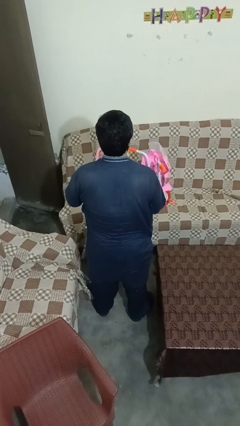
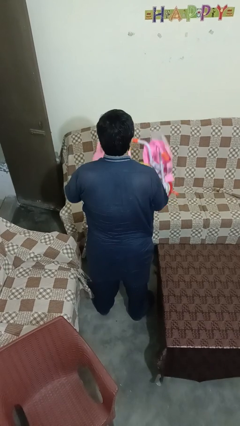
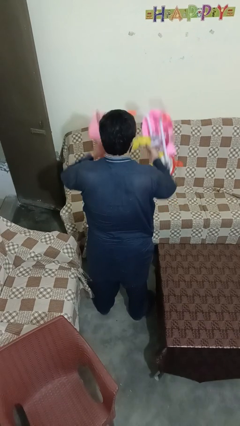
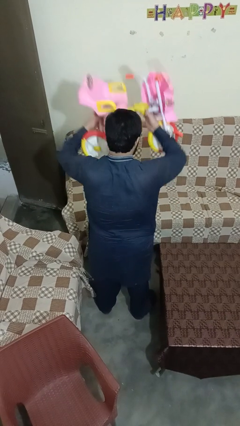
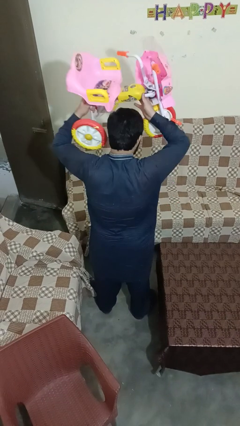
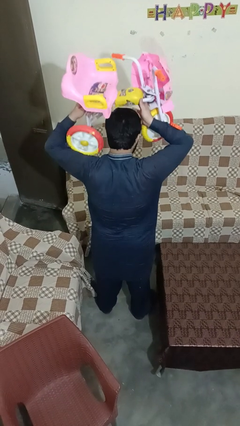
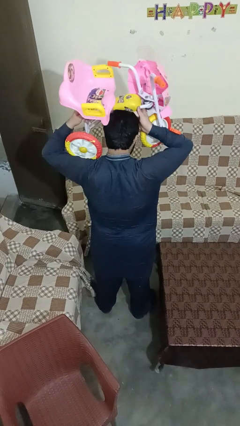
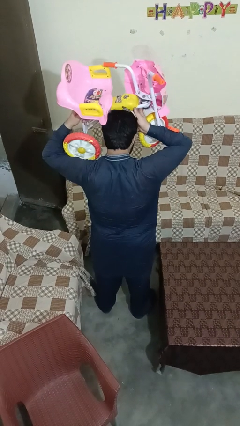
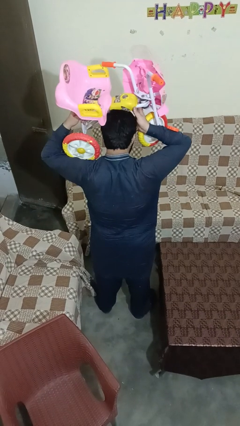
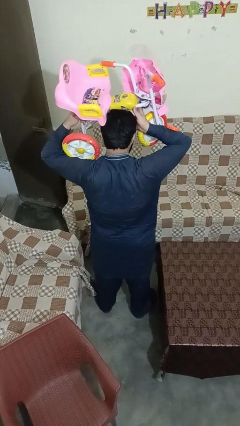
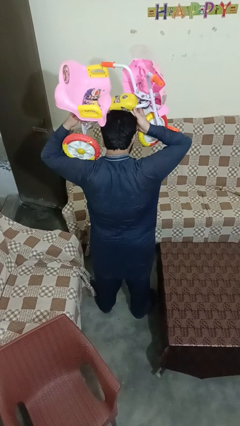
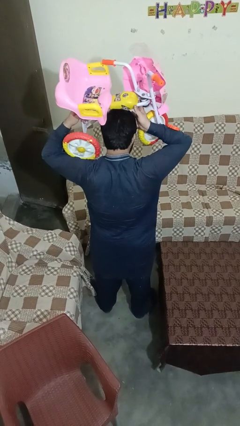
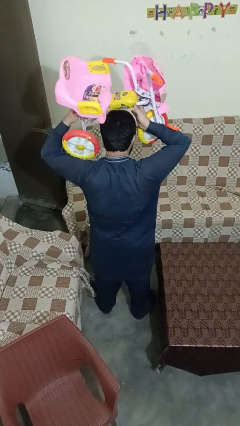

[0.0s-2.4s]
person holds object above head

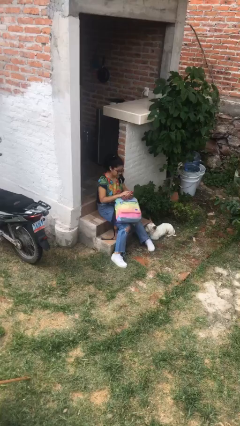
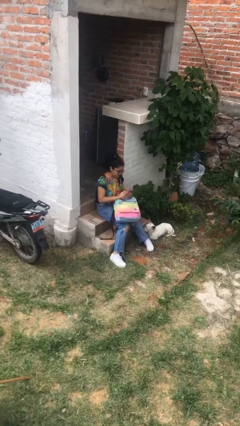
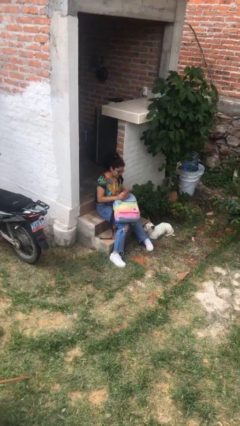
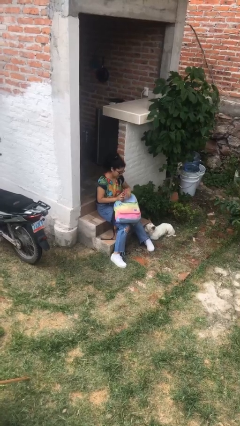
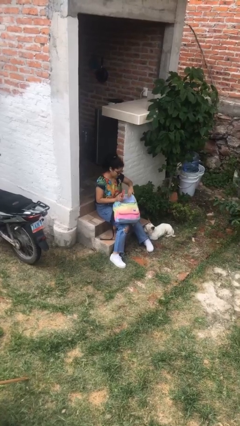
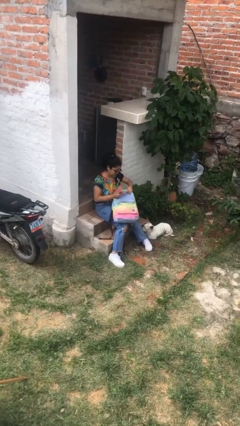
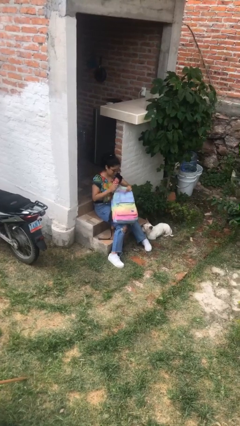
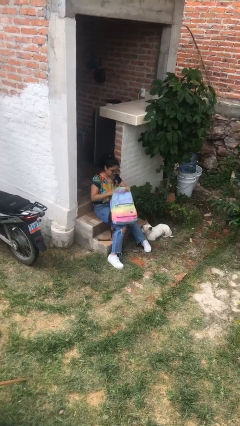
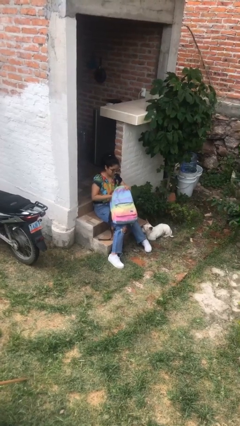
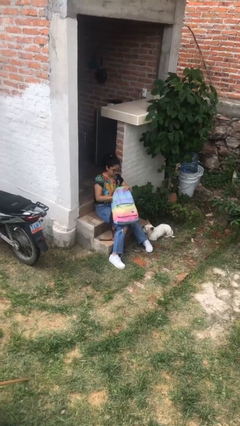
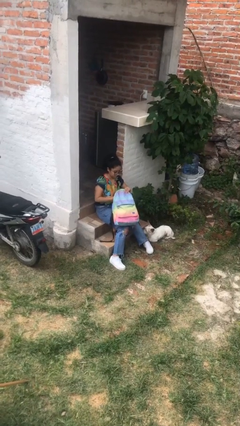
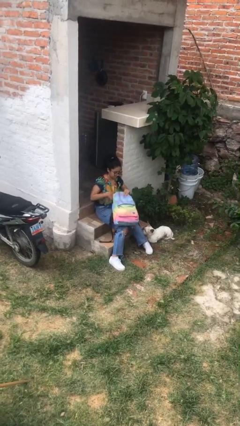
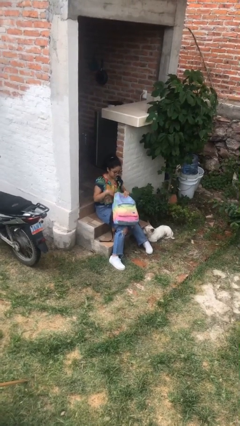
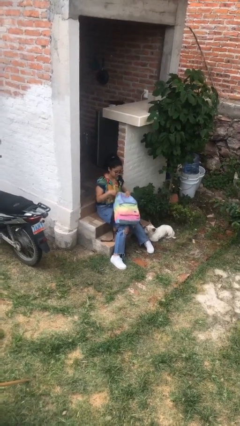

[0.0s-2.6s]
person puts object into backpack

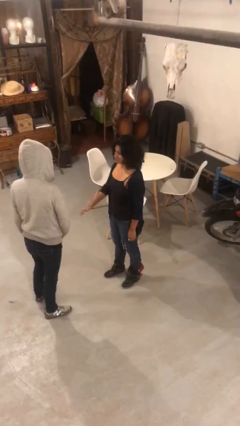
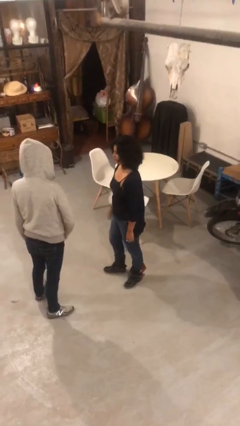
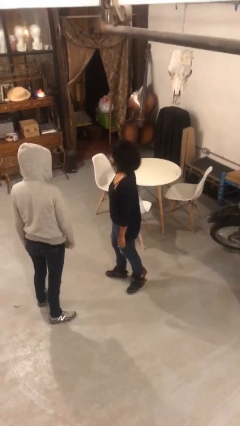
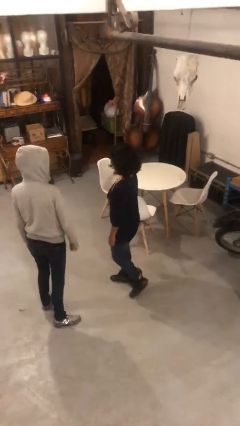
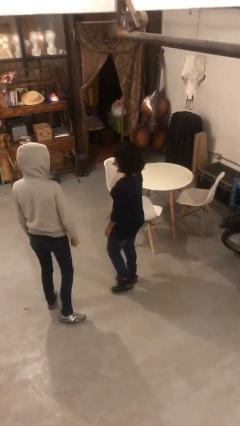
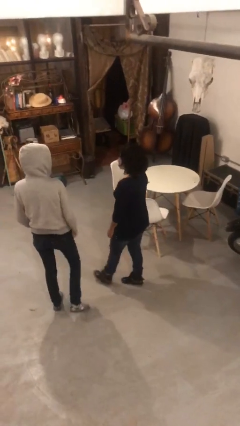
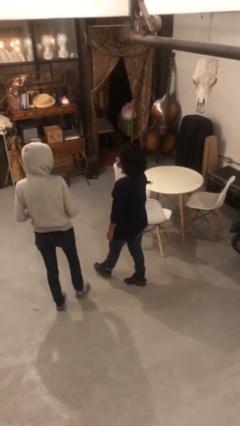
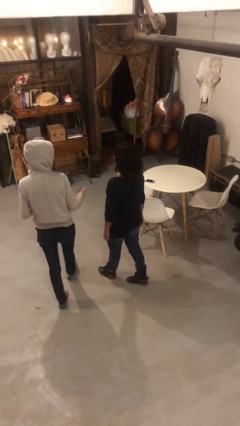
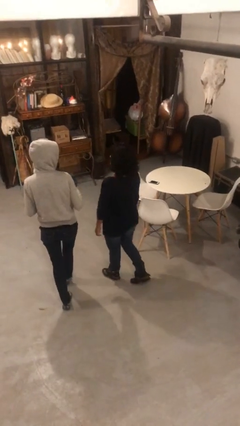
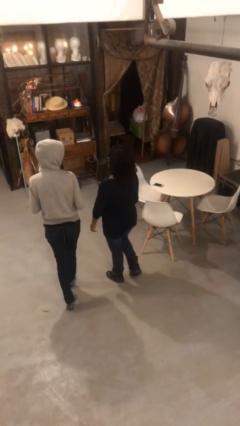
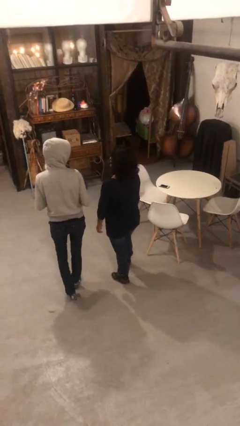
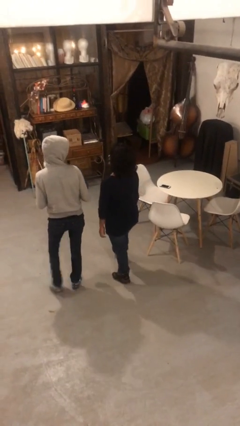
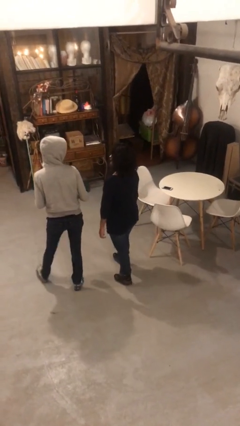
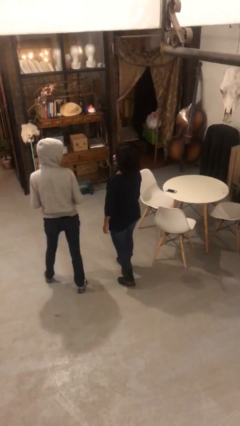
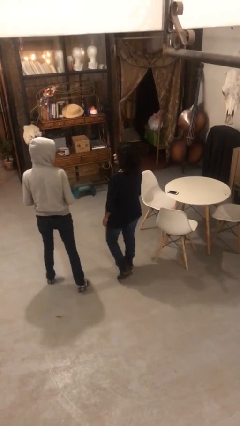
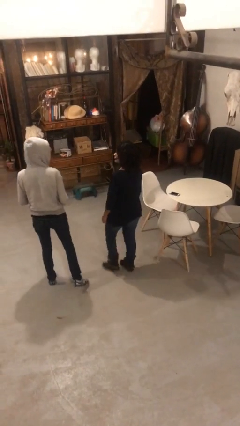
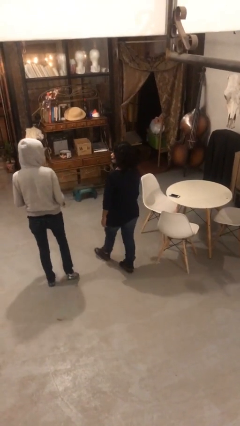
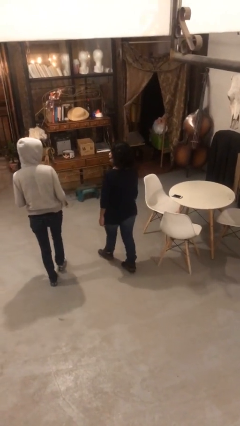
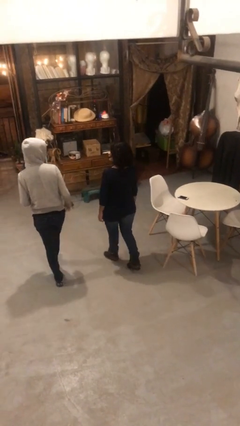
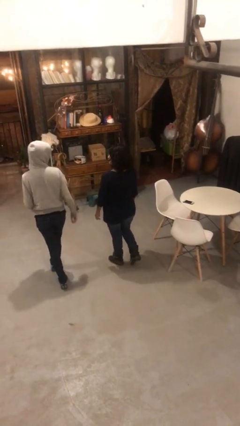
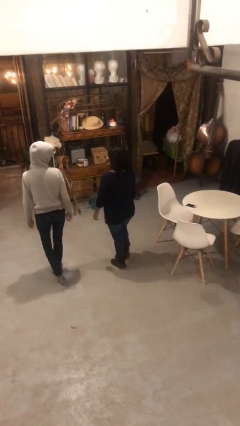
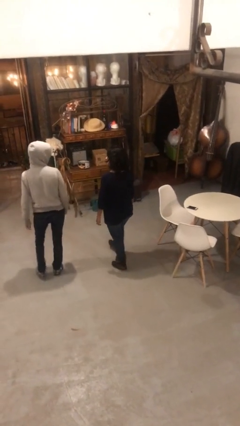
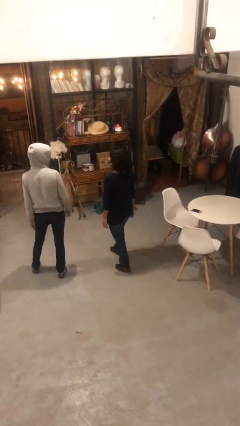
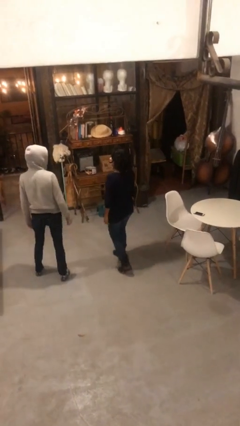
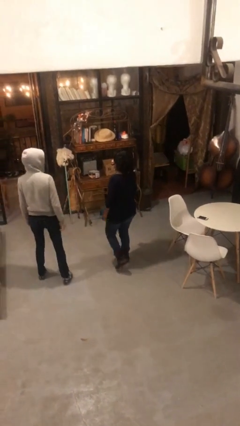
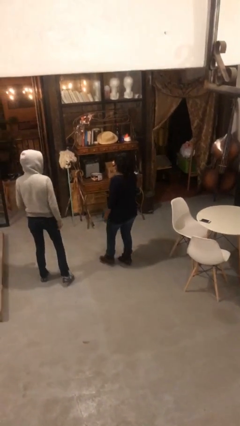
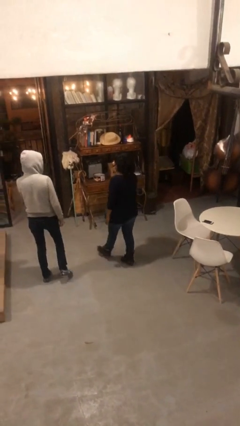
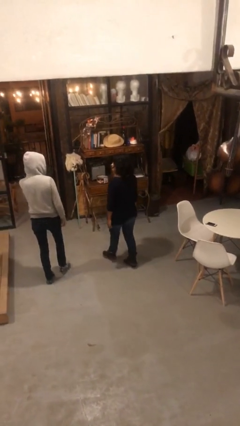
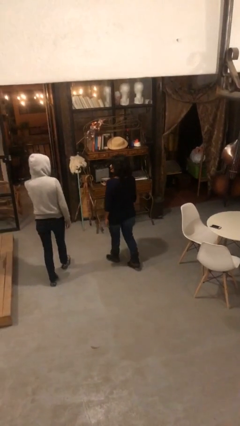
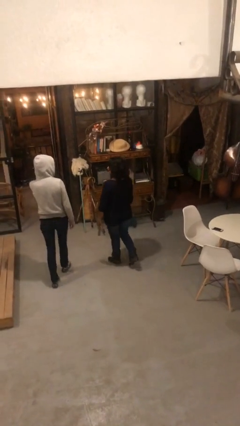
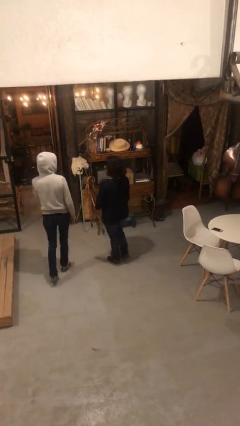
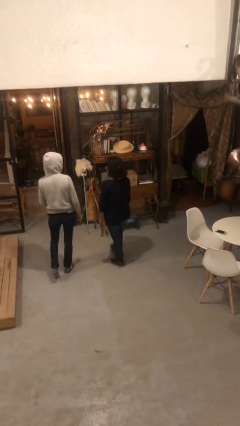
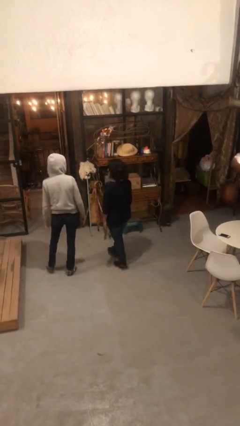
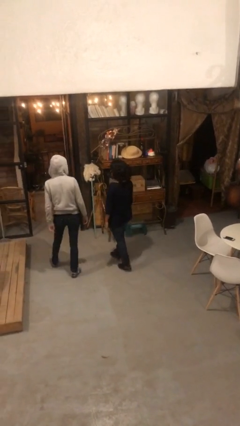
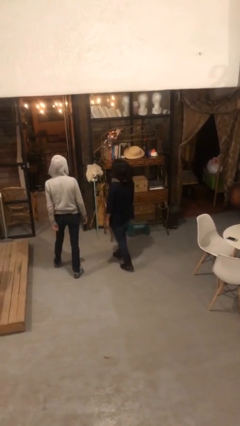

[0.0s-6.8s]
person talks to person

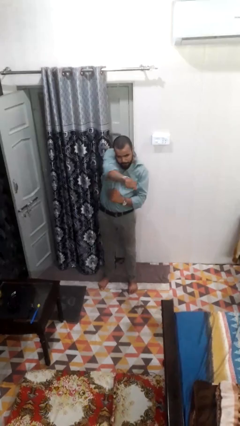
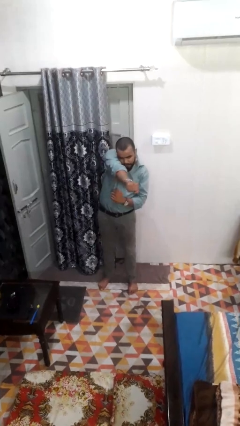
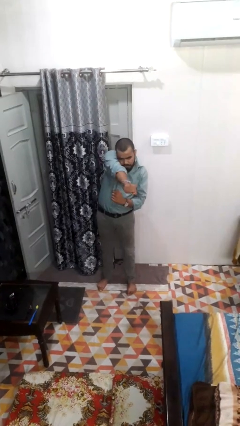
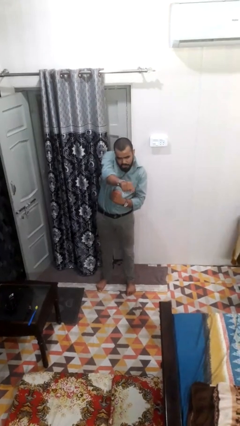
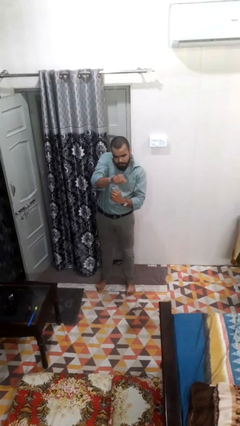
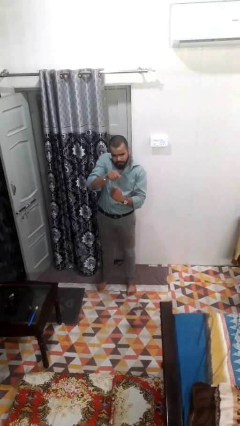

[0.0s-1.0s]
person punches

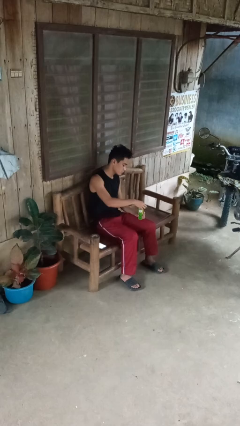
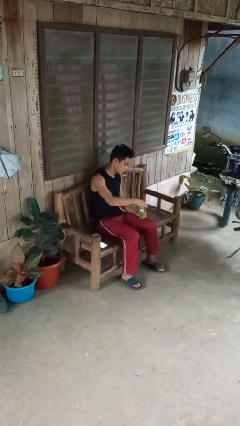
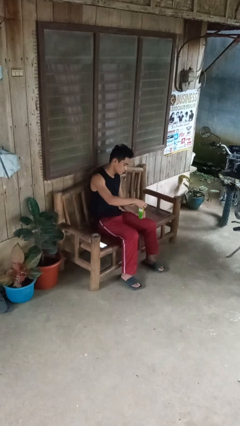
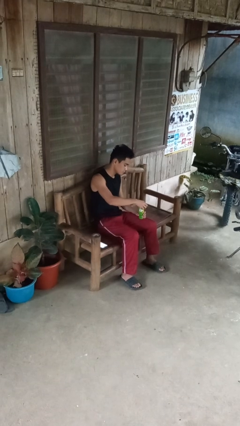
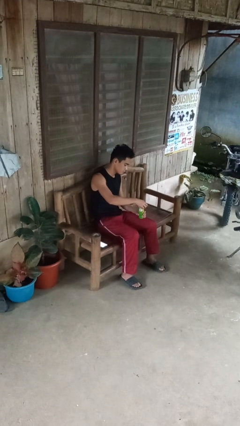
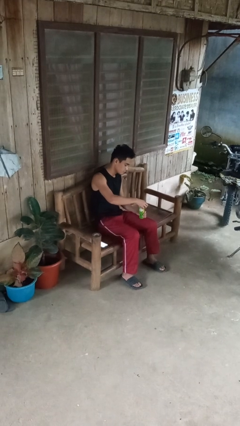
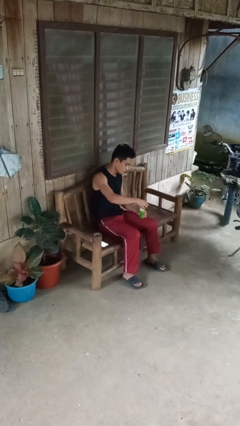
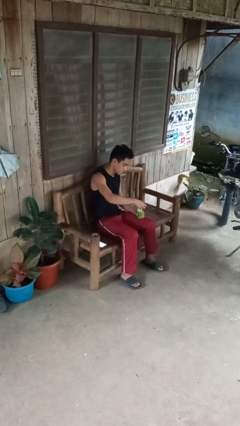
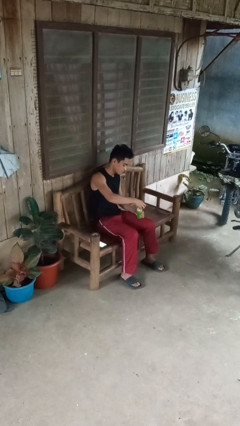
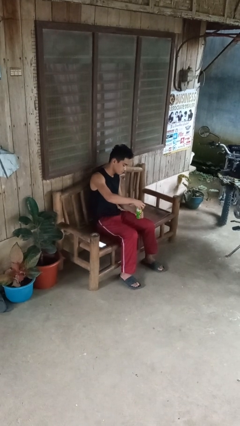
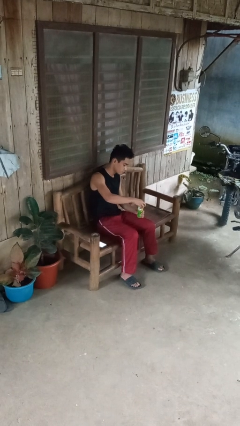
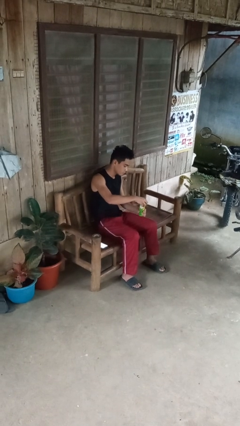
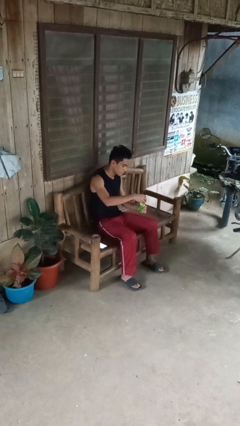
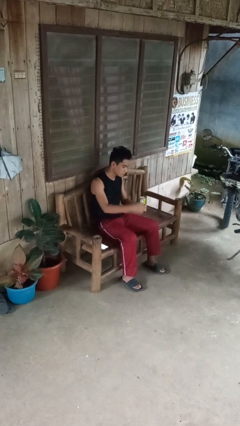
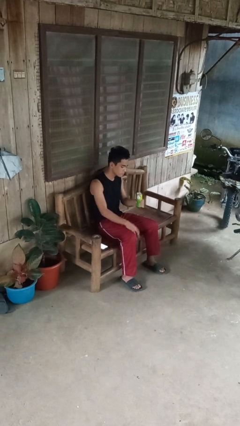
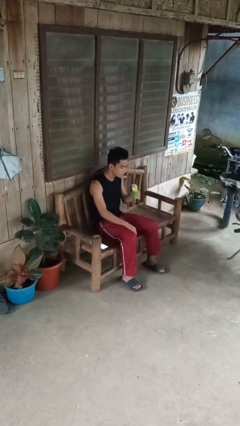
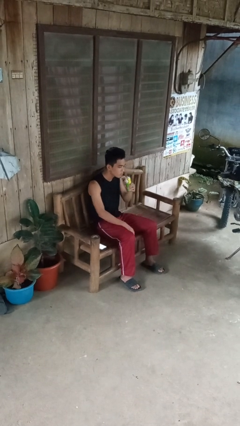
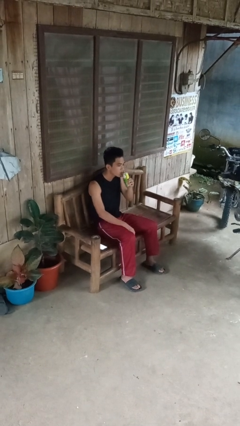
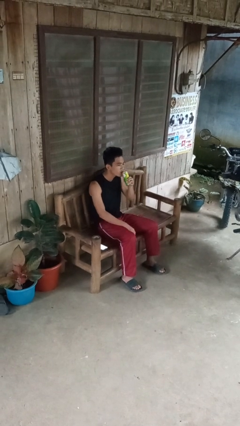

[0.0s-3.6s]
person opens beverage can

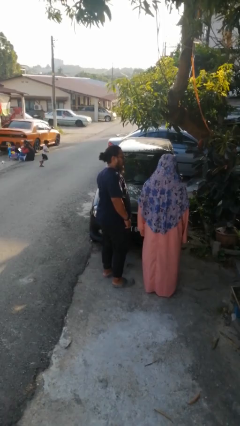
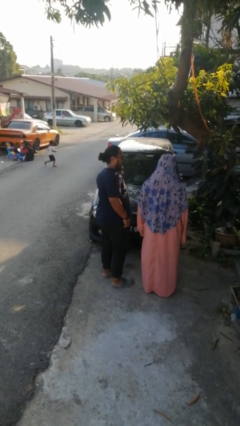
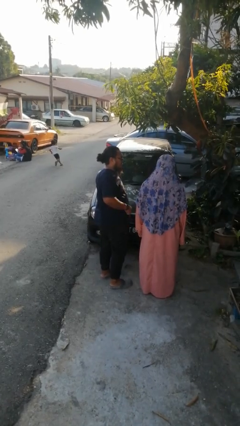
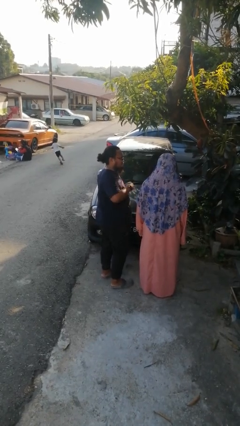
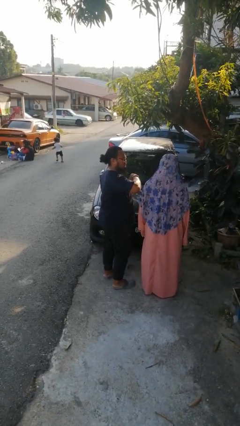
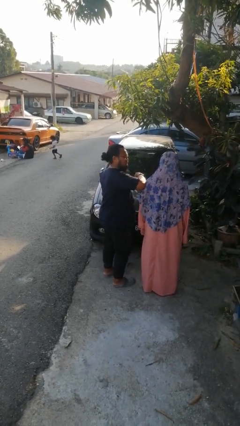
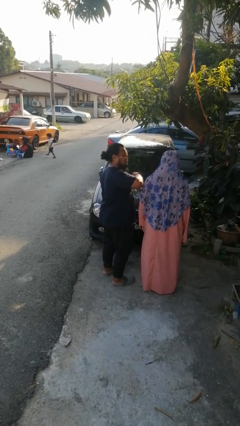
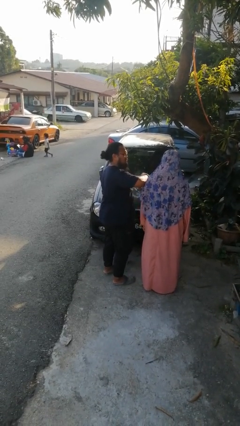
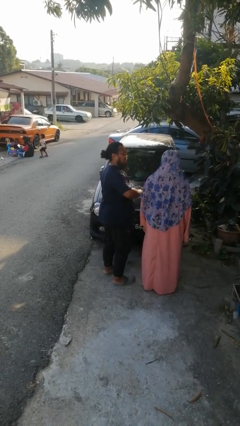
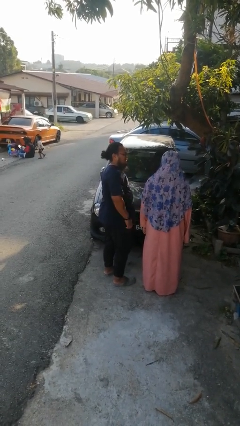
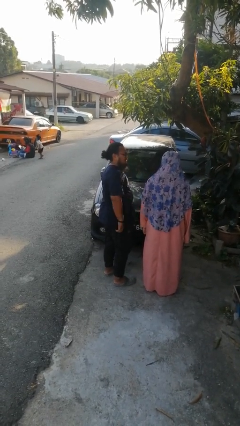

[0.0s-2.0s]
person nudges person with elbow
